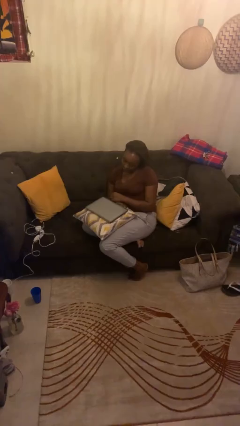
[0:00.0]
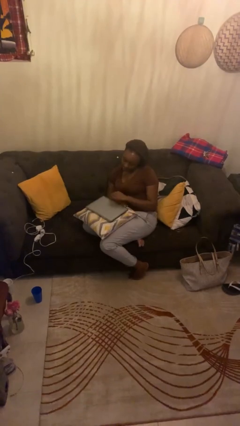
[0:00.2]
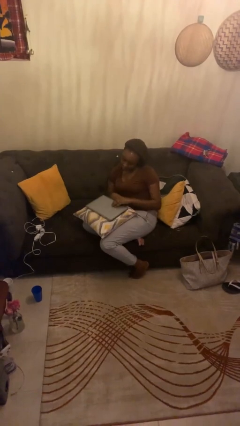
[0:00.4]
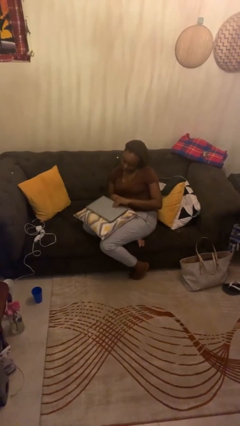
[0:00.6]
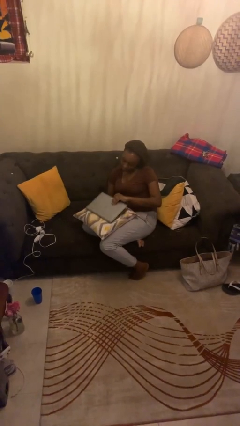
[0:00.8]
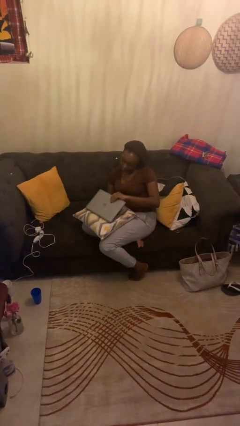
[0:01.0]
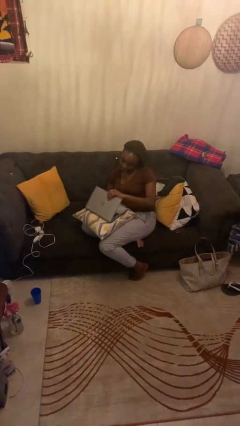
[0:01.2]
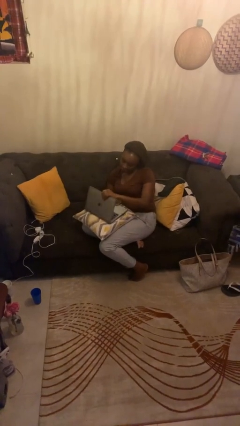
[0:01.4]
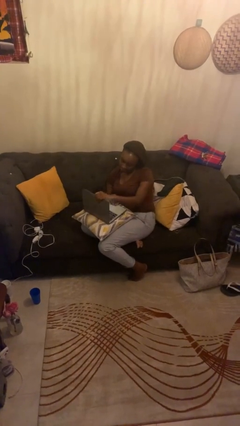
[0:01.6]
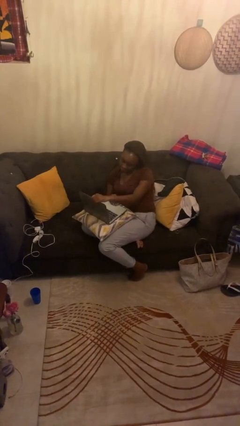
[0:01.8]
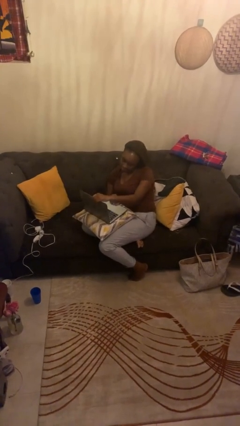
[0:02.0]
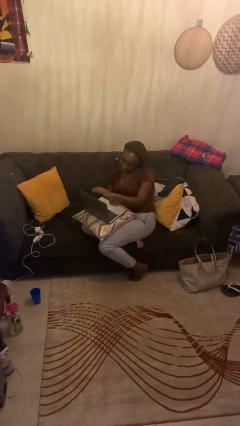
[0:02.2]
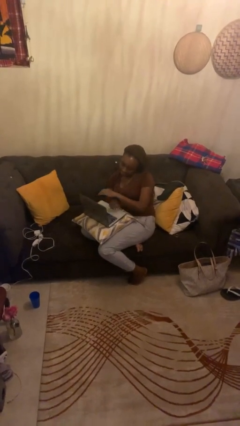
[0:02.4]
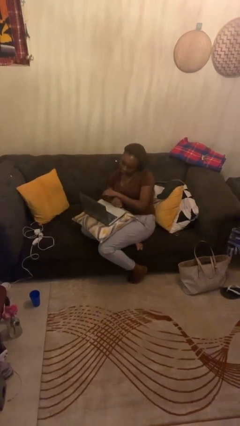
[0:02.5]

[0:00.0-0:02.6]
person opens laptop

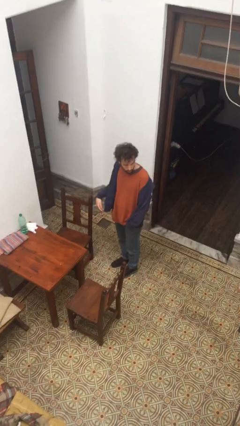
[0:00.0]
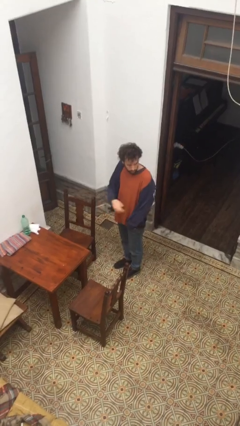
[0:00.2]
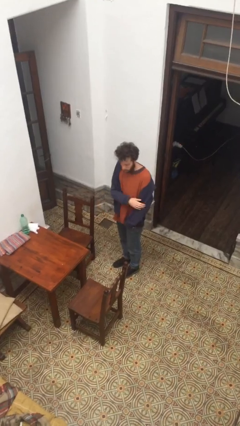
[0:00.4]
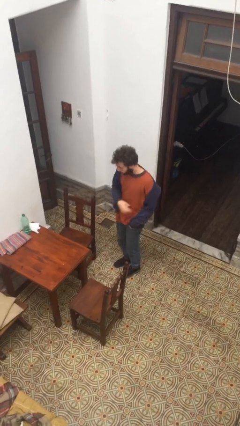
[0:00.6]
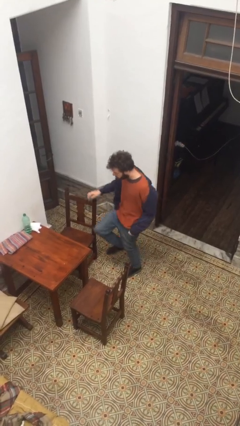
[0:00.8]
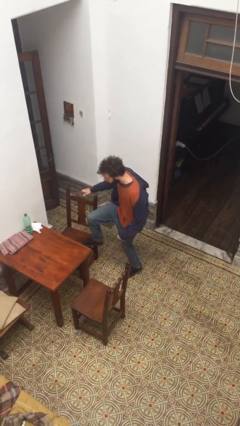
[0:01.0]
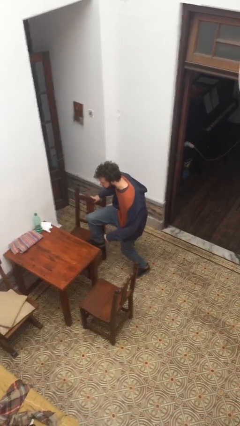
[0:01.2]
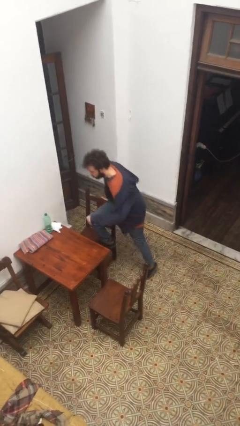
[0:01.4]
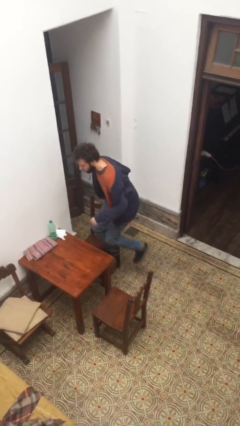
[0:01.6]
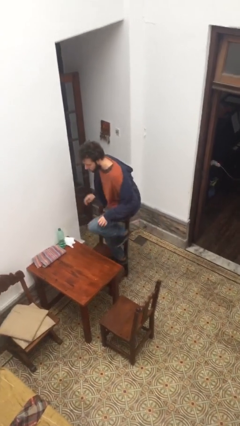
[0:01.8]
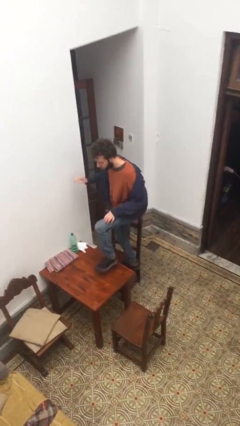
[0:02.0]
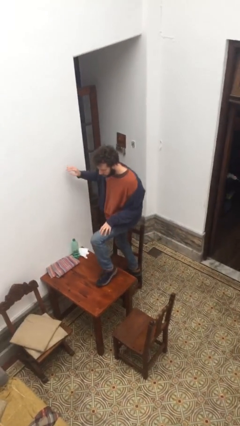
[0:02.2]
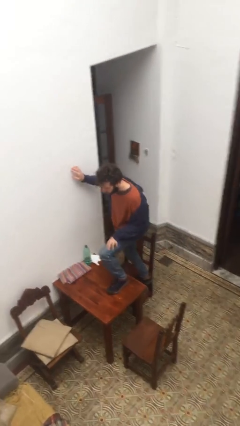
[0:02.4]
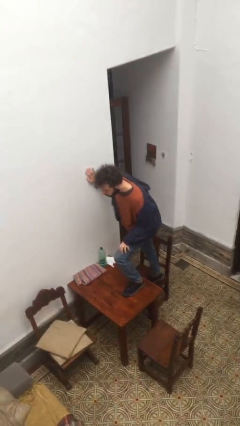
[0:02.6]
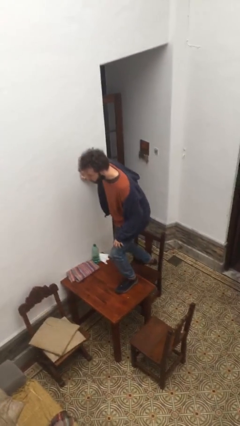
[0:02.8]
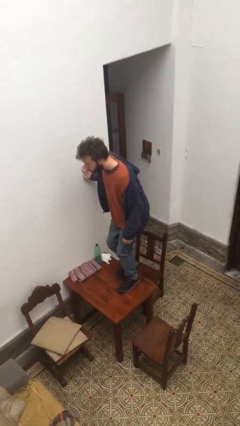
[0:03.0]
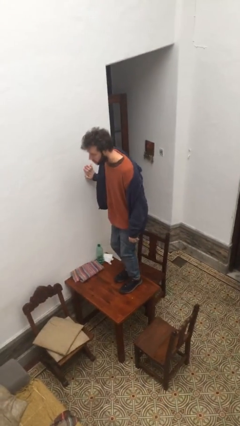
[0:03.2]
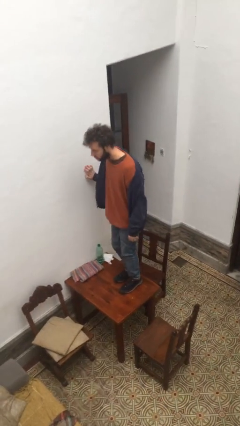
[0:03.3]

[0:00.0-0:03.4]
person climbs on table

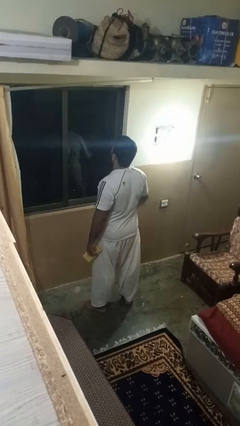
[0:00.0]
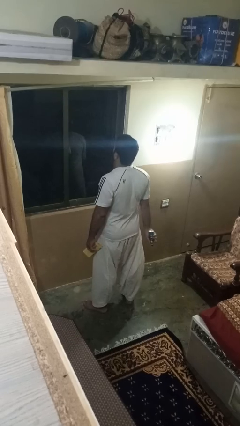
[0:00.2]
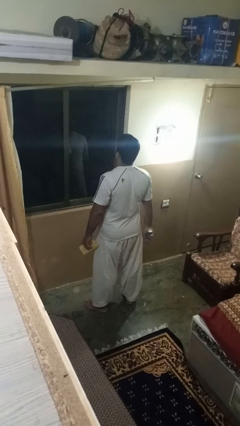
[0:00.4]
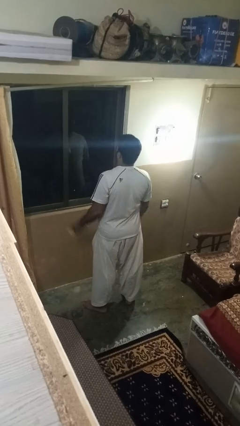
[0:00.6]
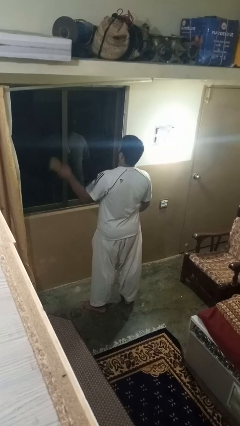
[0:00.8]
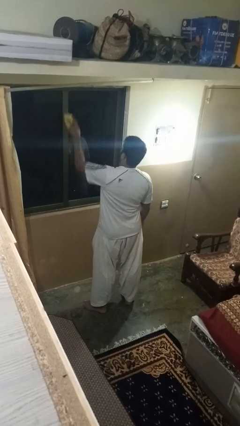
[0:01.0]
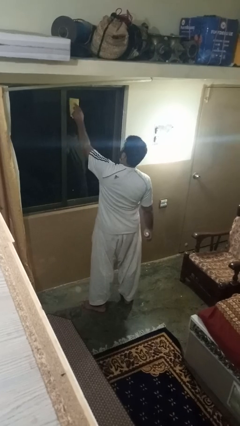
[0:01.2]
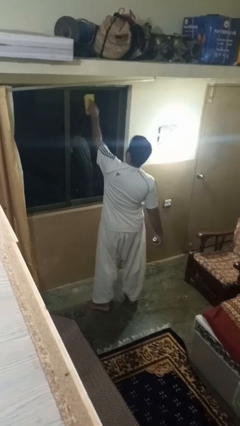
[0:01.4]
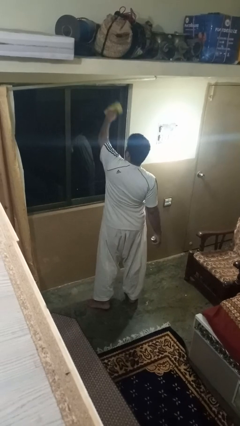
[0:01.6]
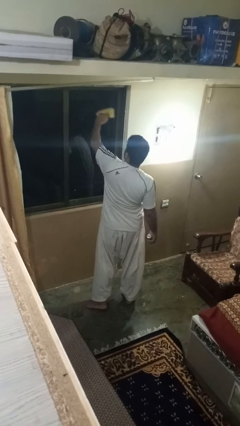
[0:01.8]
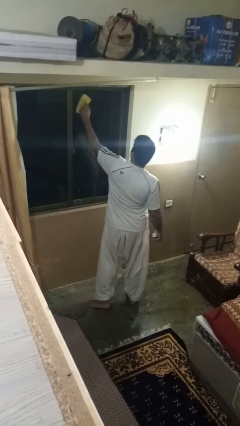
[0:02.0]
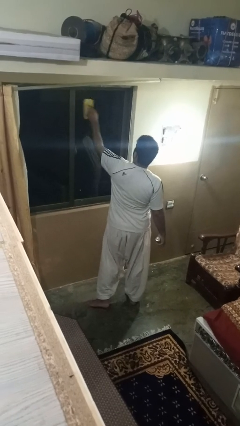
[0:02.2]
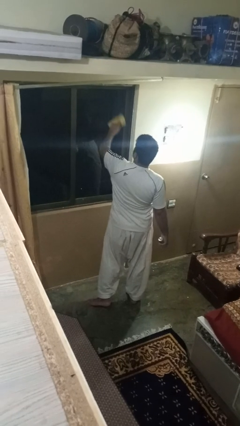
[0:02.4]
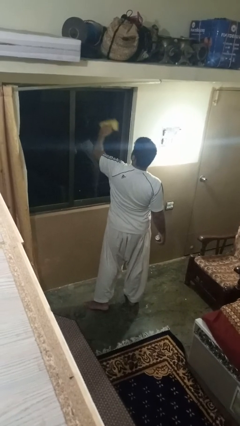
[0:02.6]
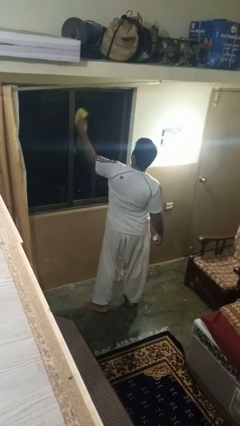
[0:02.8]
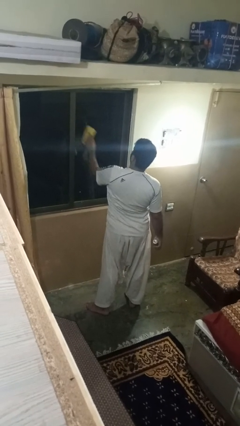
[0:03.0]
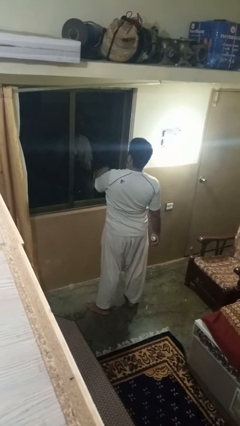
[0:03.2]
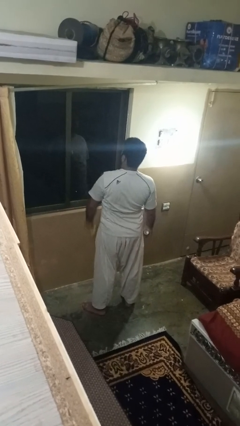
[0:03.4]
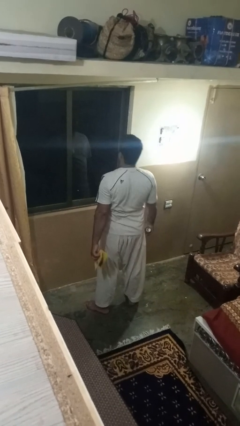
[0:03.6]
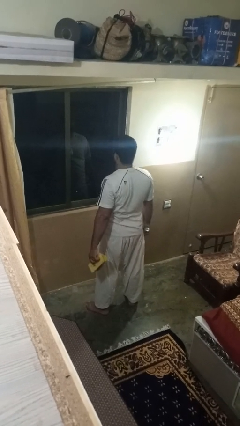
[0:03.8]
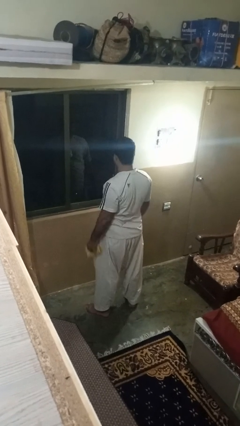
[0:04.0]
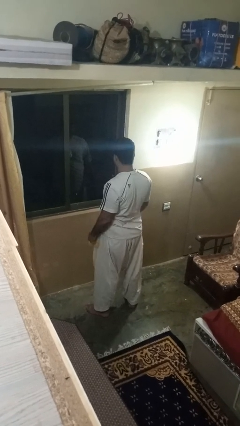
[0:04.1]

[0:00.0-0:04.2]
person washes window

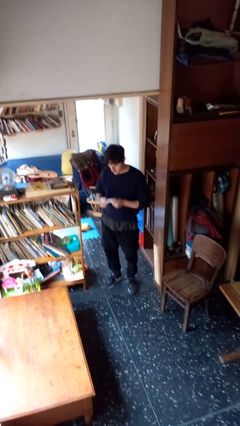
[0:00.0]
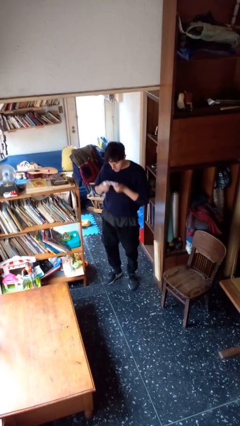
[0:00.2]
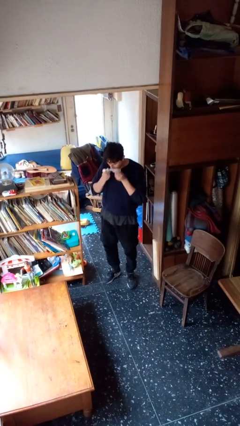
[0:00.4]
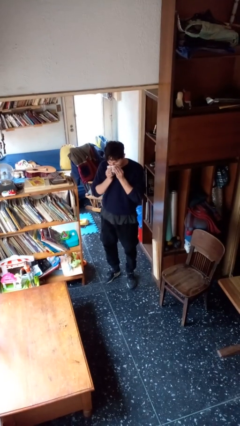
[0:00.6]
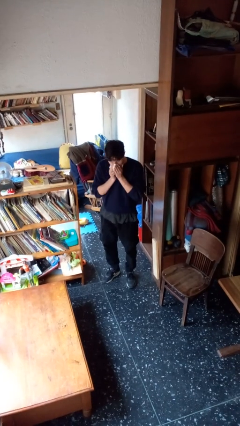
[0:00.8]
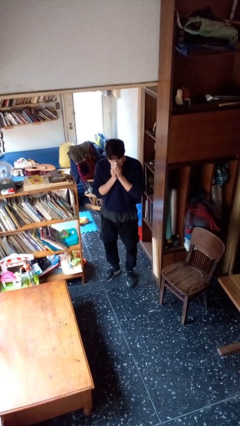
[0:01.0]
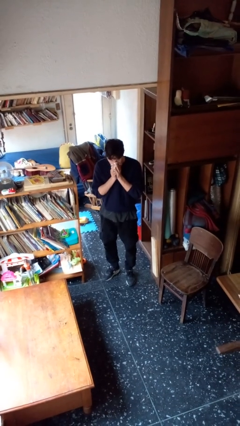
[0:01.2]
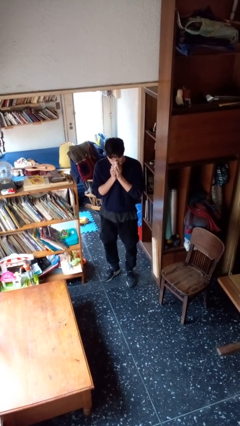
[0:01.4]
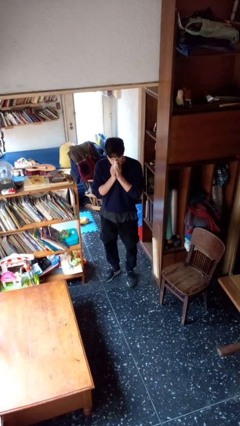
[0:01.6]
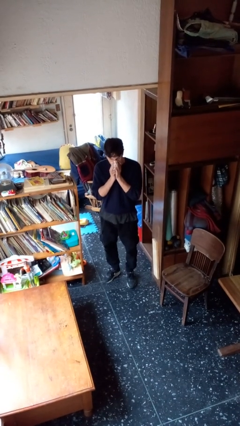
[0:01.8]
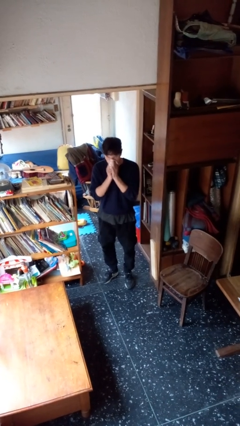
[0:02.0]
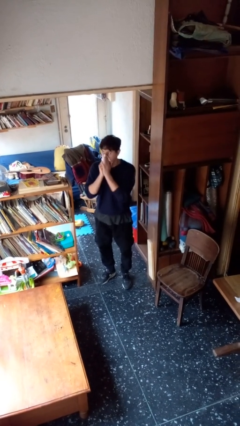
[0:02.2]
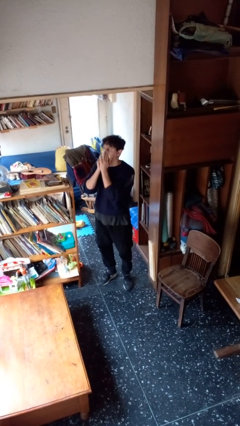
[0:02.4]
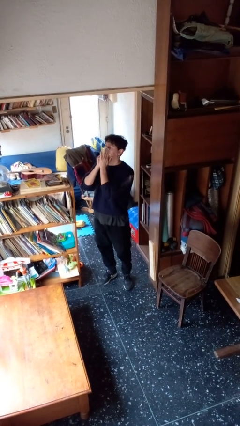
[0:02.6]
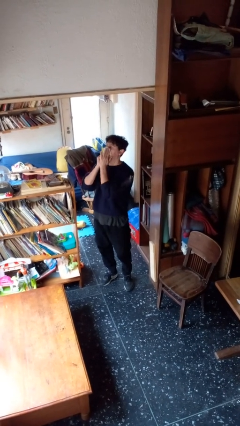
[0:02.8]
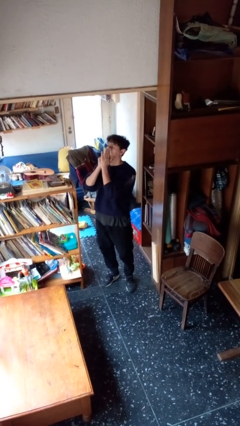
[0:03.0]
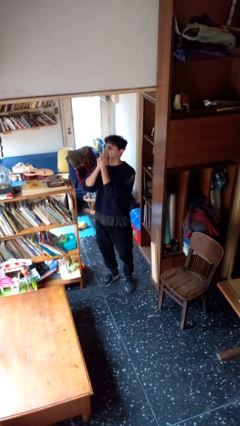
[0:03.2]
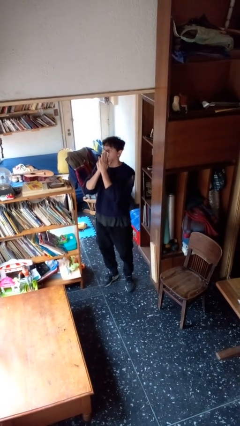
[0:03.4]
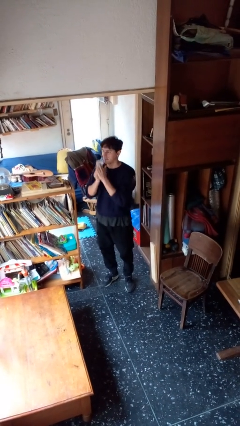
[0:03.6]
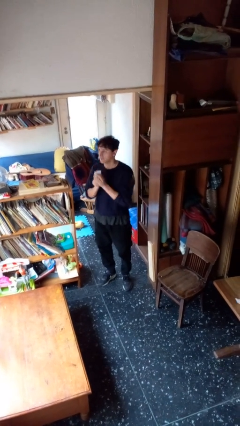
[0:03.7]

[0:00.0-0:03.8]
person blows nose

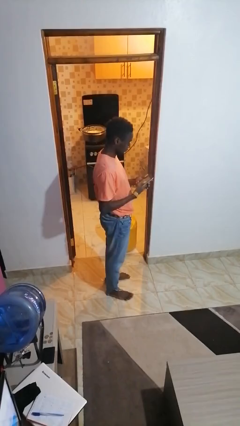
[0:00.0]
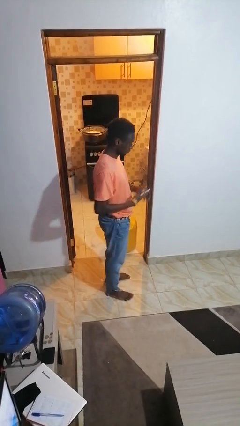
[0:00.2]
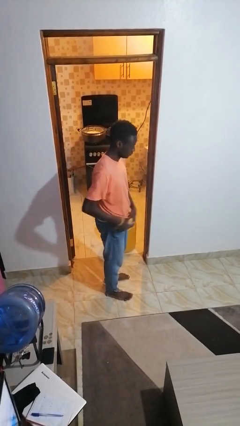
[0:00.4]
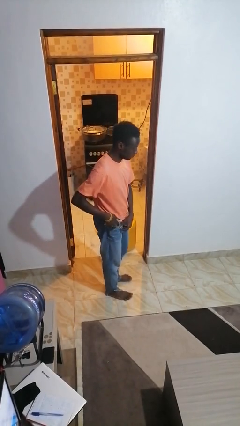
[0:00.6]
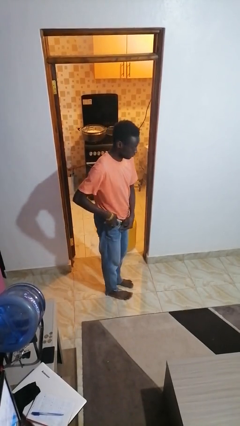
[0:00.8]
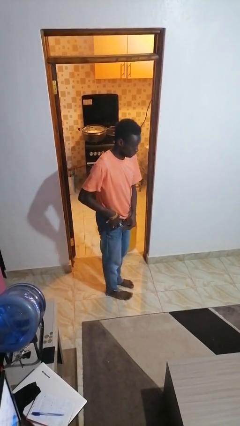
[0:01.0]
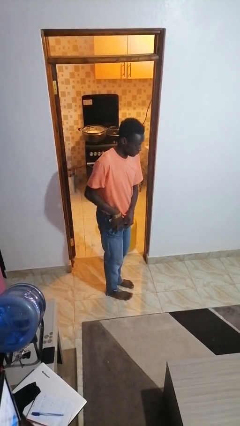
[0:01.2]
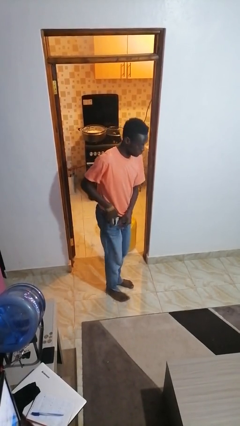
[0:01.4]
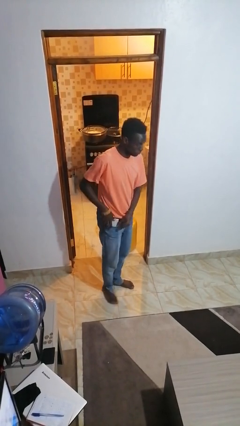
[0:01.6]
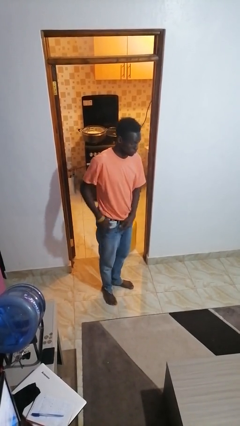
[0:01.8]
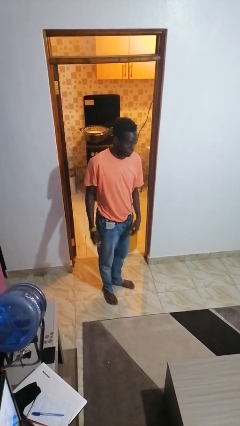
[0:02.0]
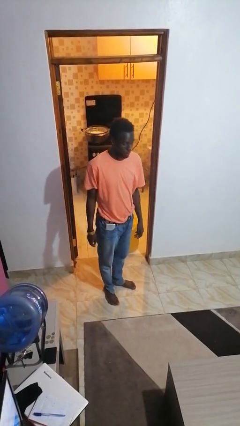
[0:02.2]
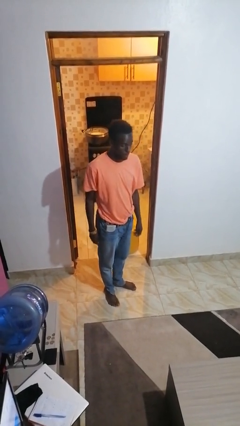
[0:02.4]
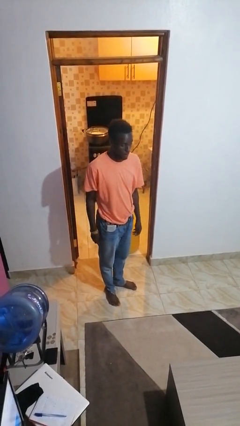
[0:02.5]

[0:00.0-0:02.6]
person puts phone into pocket

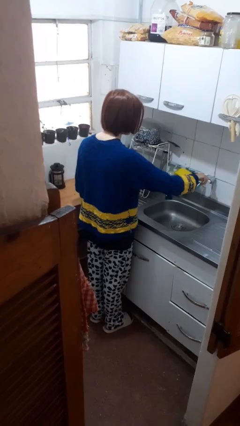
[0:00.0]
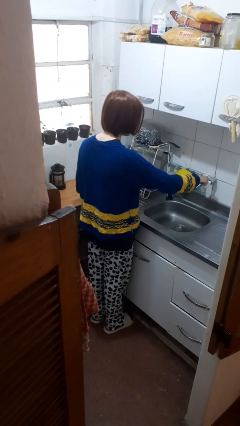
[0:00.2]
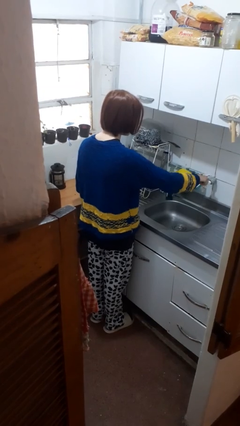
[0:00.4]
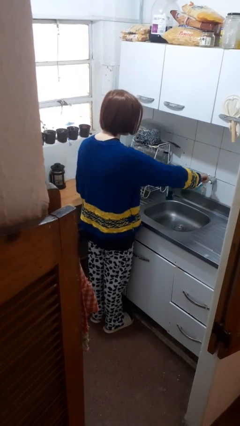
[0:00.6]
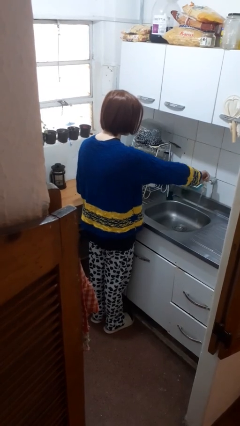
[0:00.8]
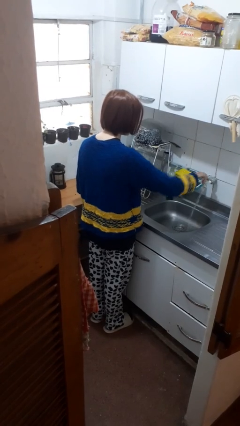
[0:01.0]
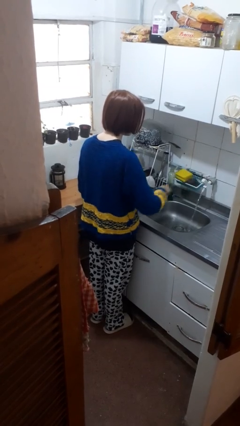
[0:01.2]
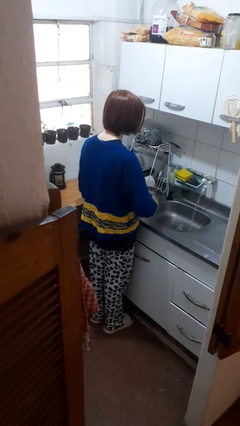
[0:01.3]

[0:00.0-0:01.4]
person turns on faucet
